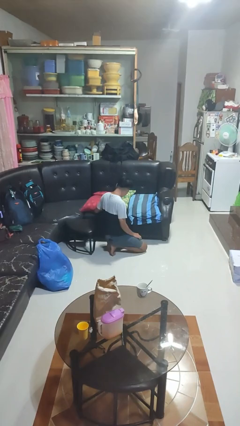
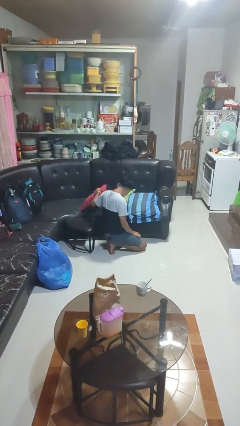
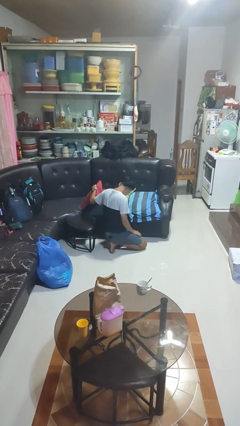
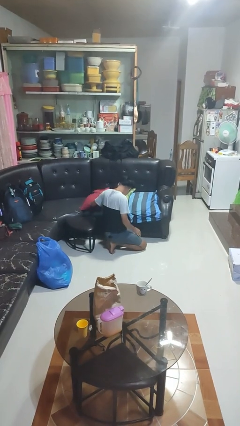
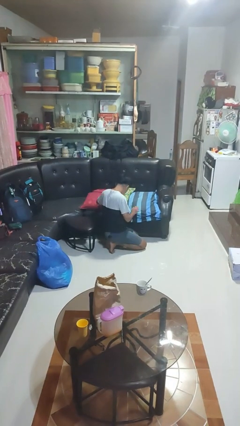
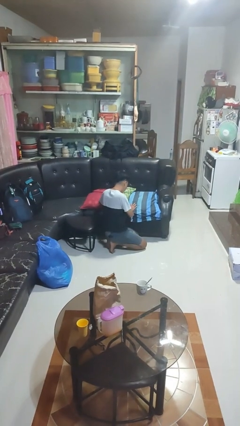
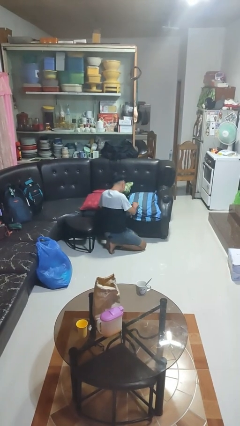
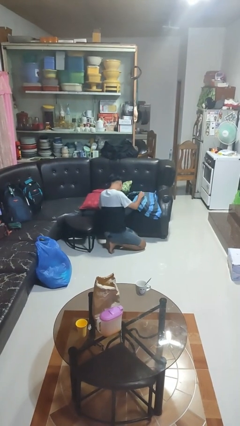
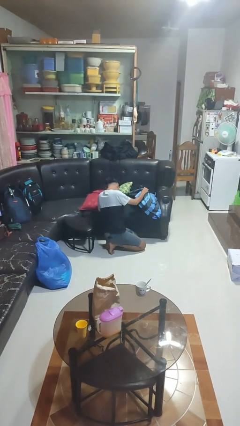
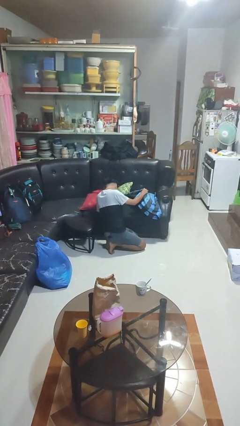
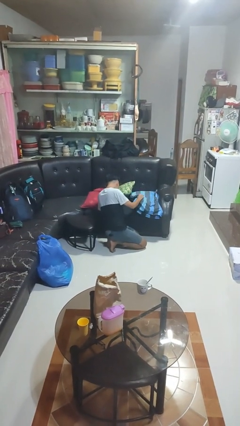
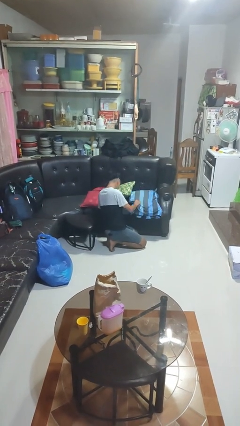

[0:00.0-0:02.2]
person searches in couch

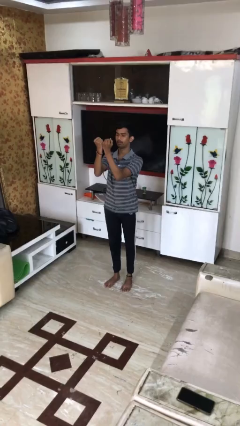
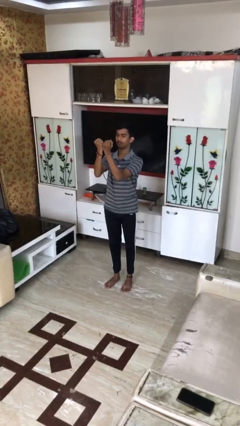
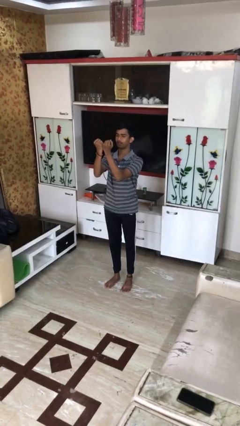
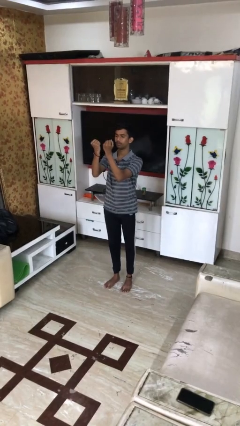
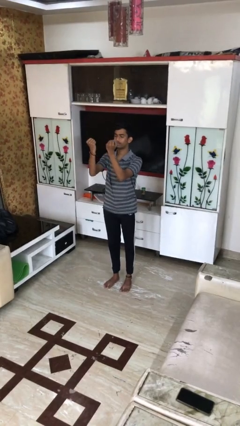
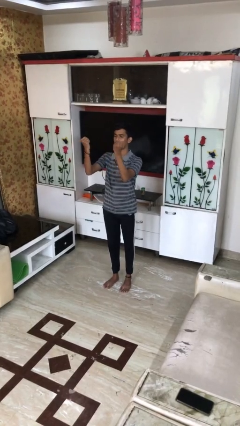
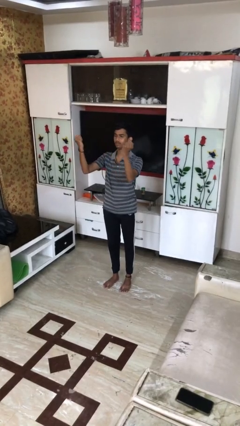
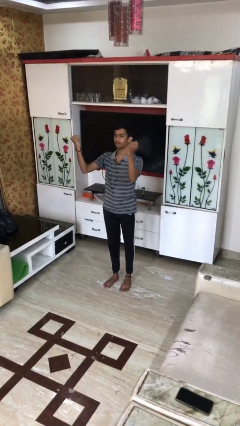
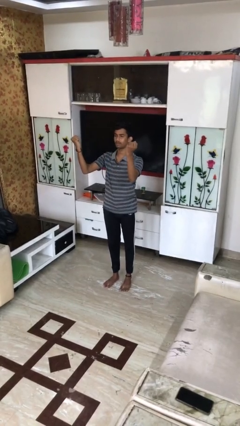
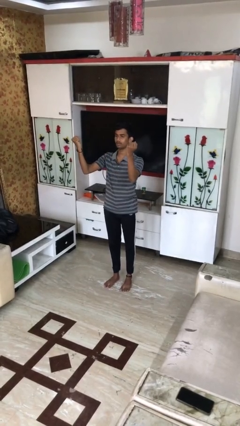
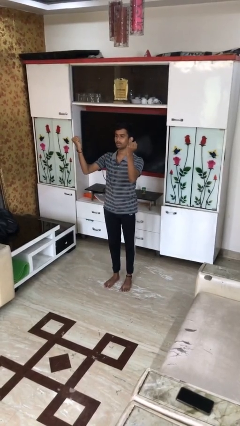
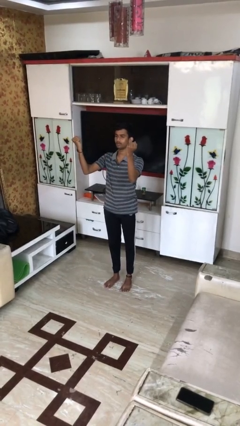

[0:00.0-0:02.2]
person gestures zoom in

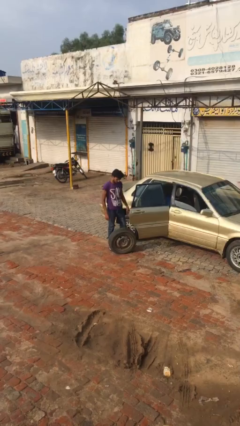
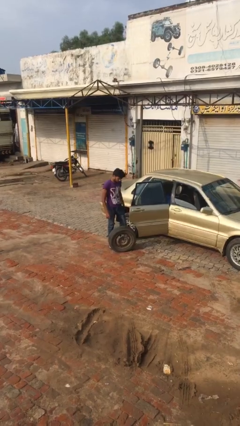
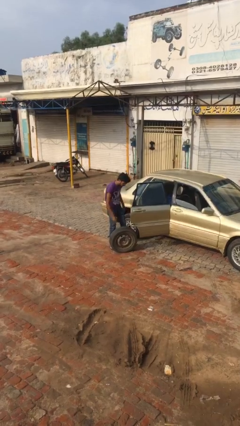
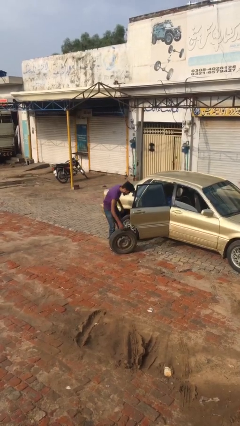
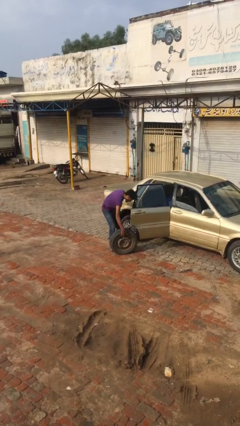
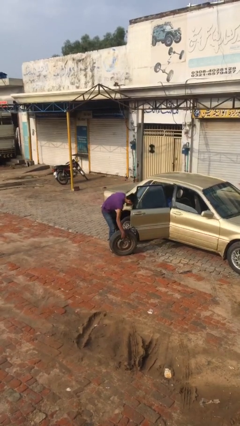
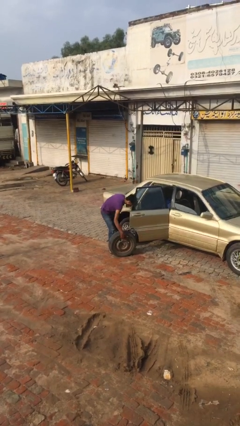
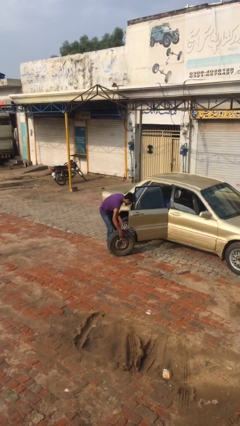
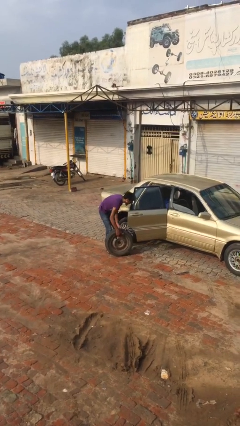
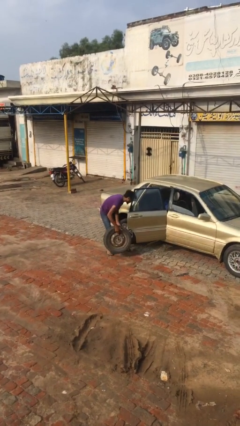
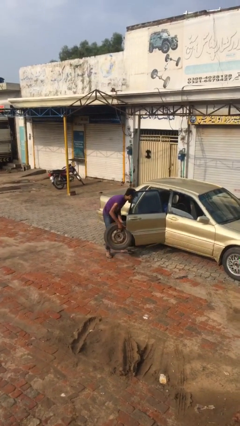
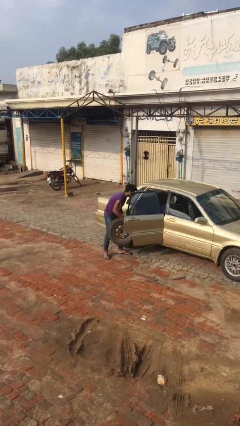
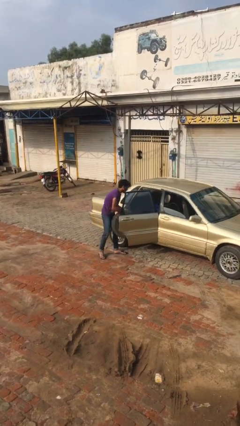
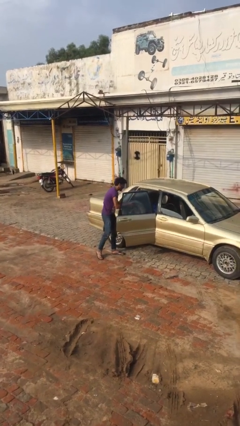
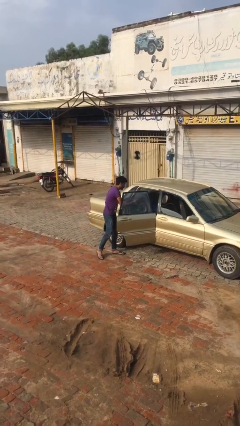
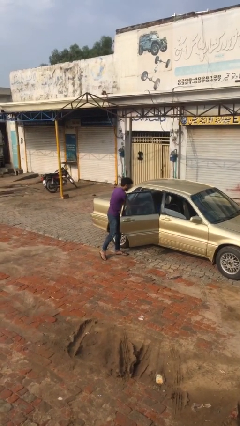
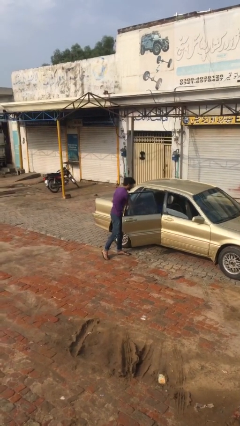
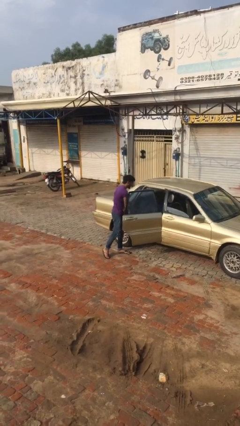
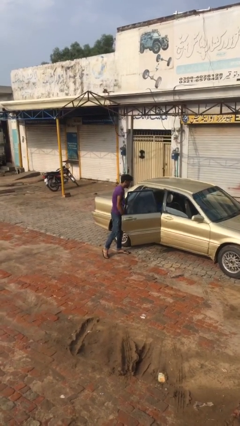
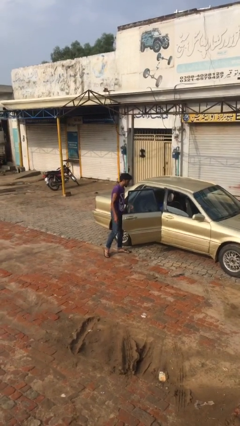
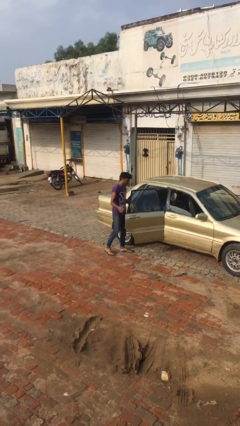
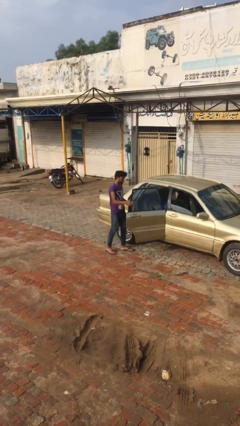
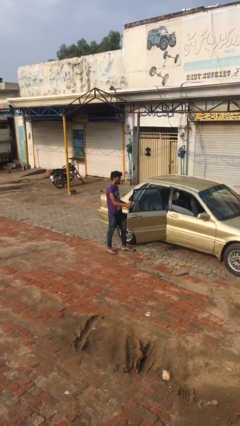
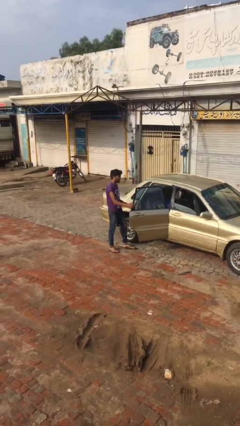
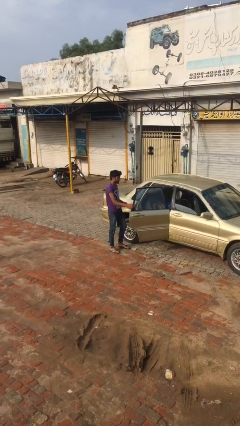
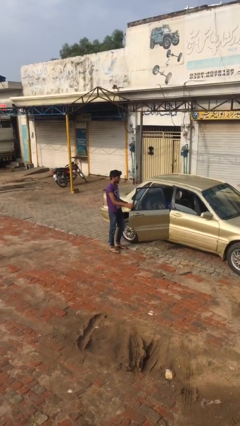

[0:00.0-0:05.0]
person loads car

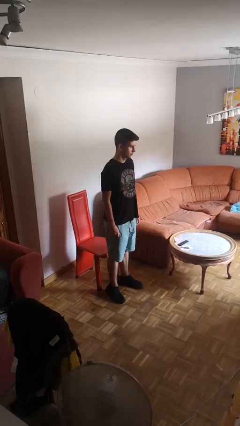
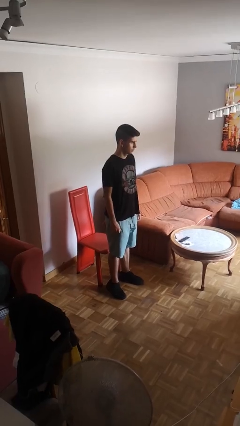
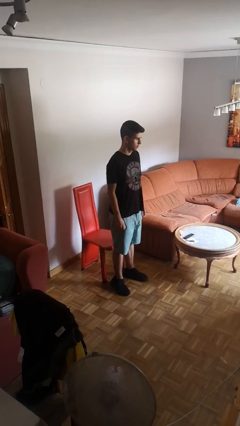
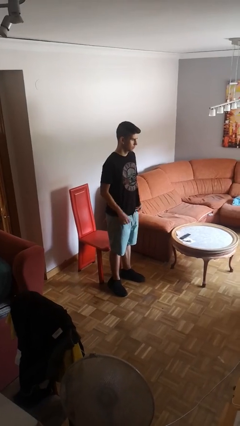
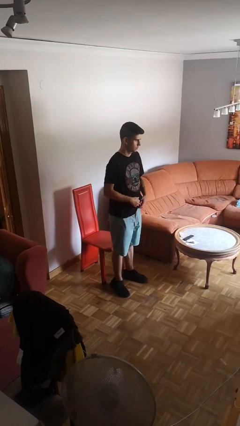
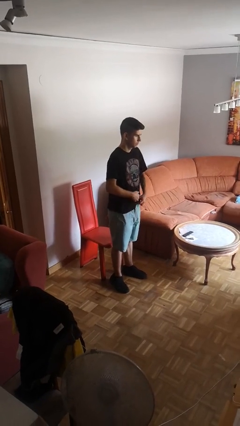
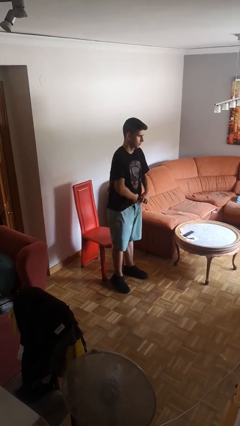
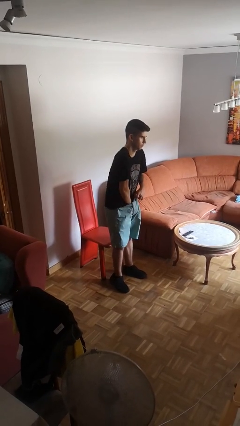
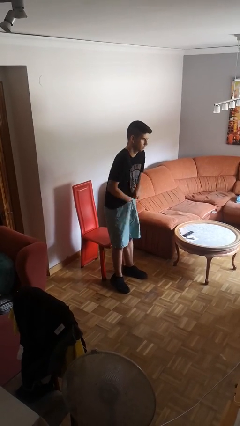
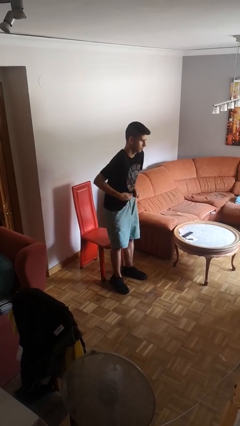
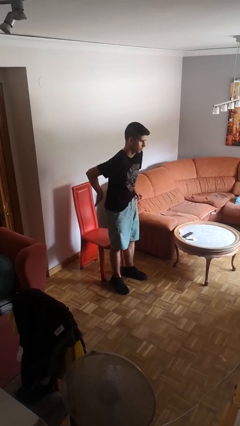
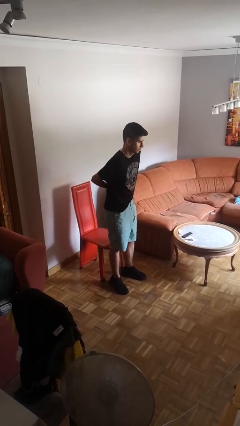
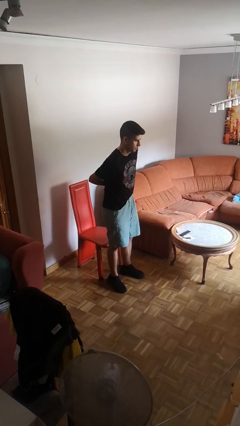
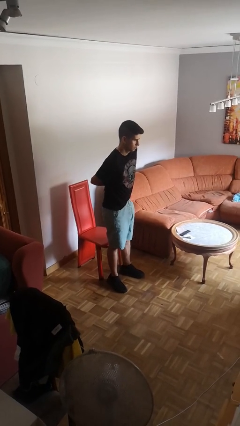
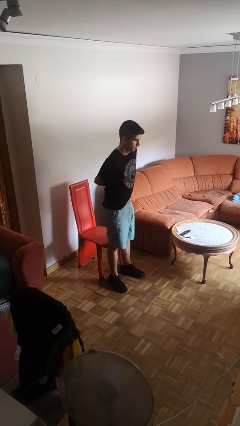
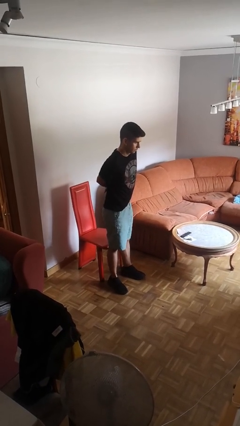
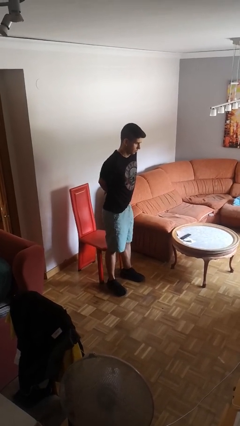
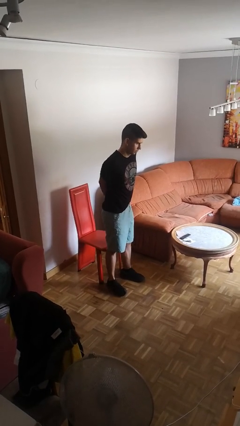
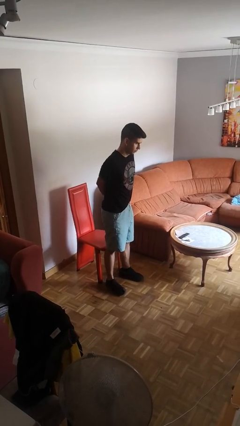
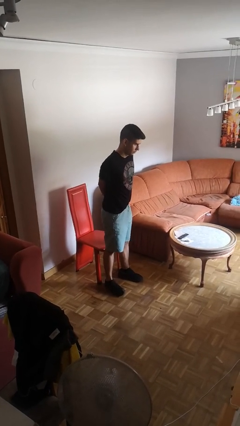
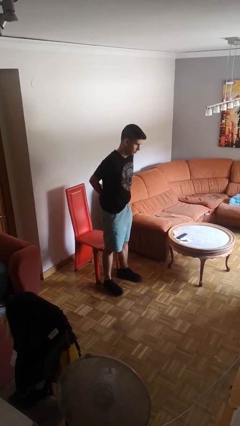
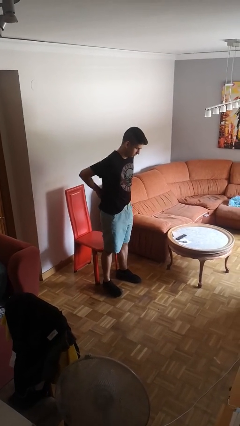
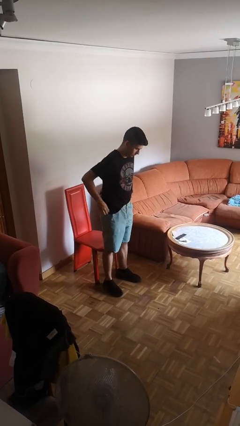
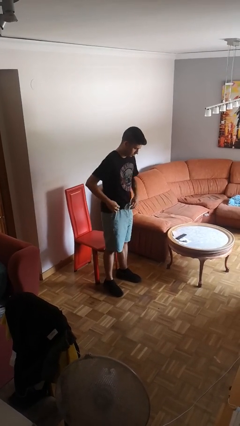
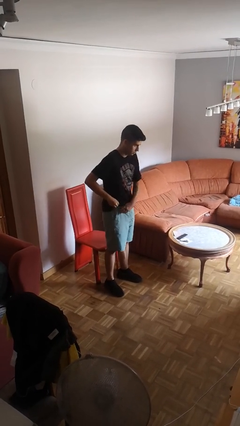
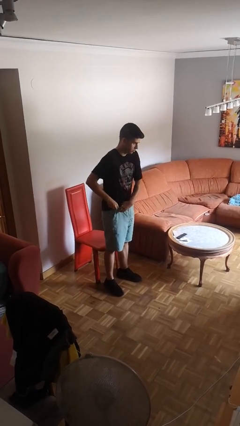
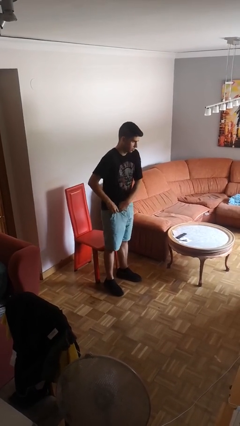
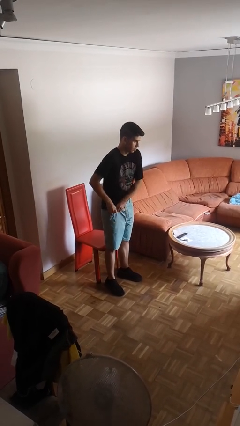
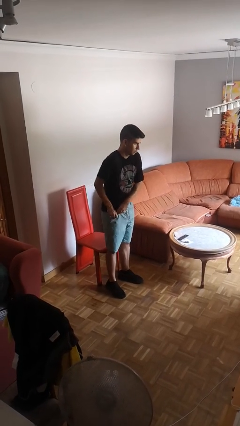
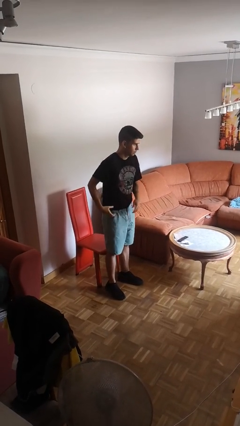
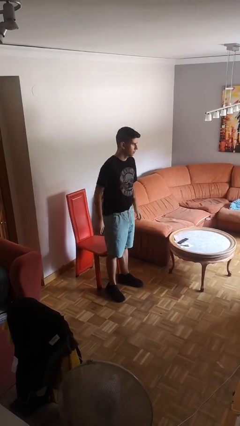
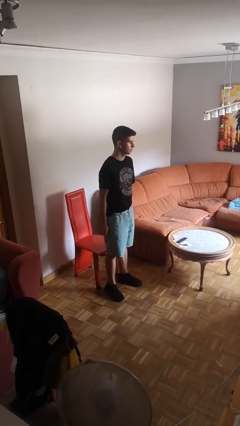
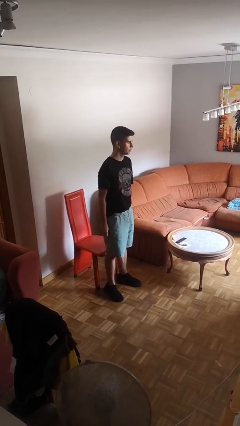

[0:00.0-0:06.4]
person tucks in shirt

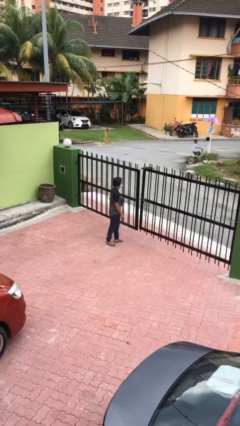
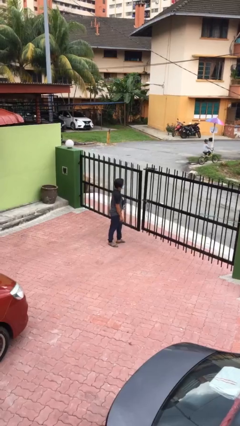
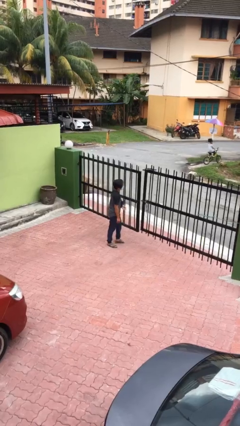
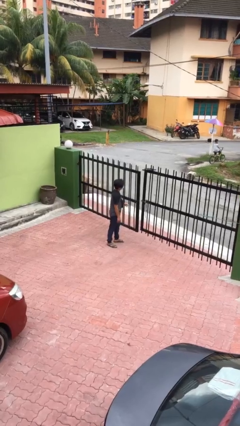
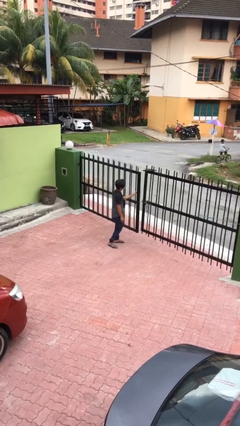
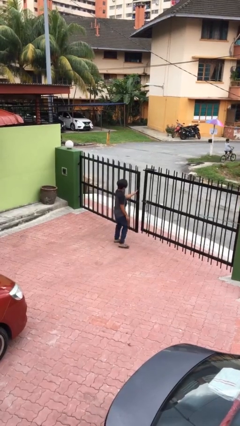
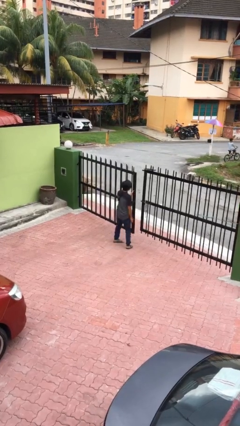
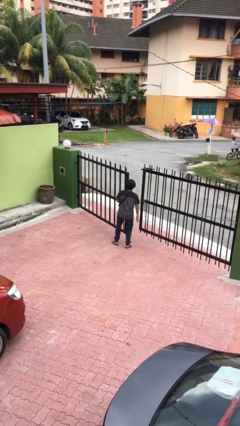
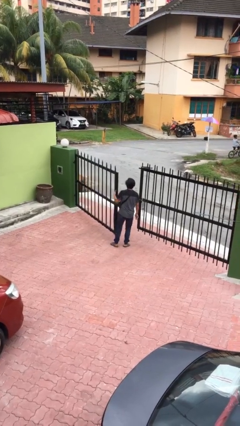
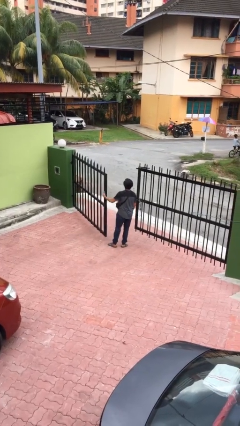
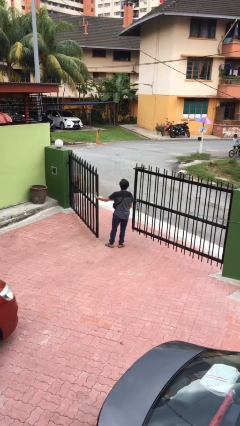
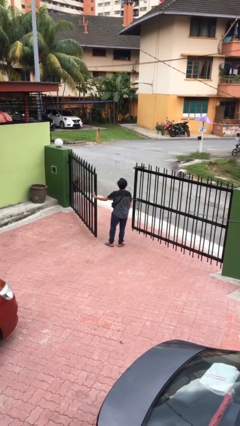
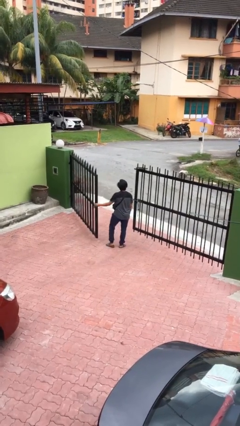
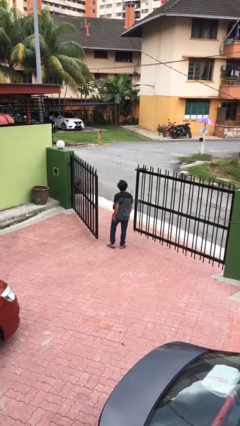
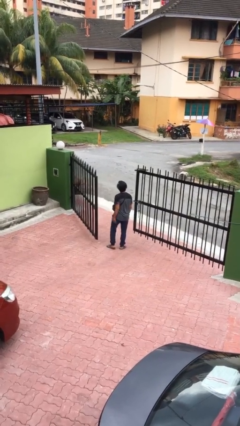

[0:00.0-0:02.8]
person opens facility door
